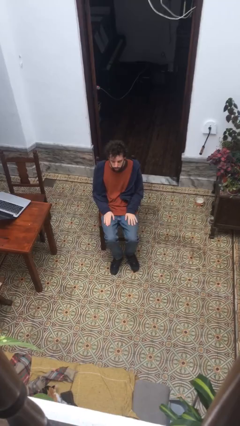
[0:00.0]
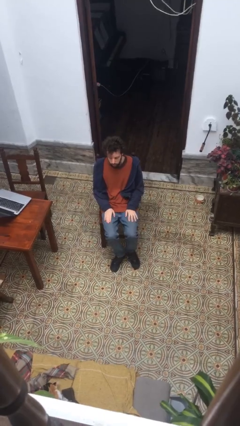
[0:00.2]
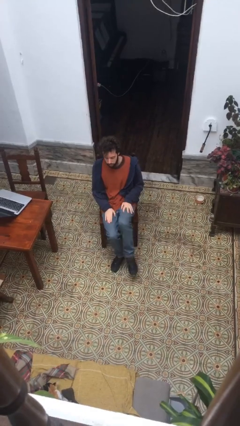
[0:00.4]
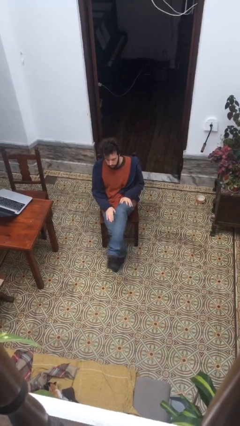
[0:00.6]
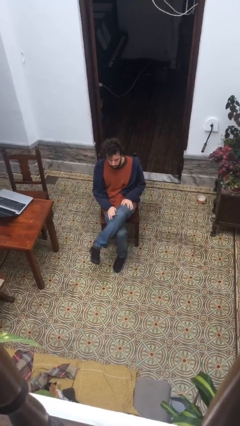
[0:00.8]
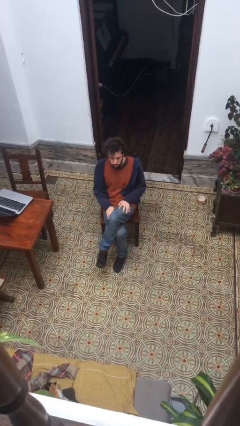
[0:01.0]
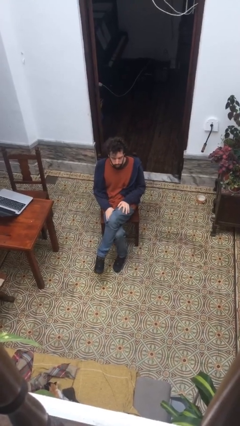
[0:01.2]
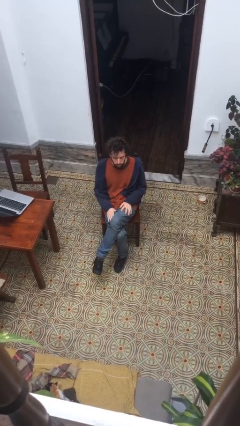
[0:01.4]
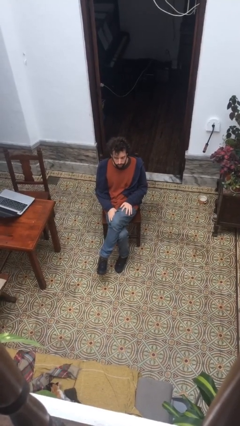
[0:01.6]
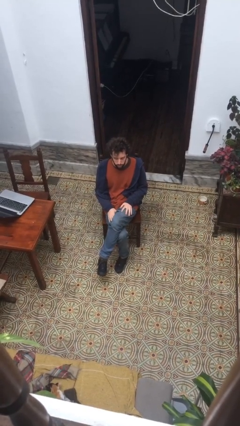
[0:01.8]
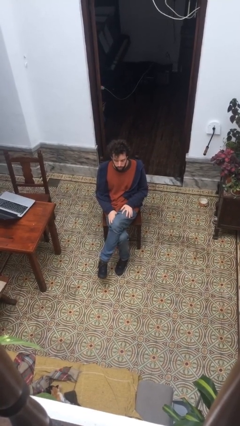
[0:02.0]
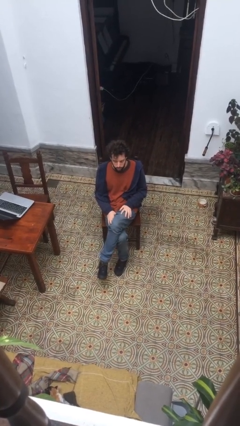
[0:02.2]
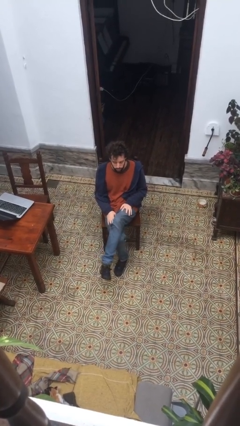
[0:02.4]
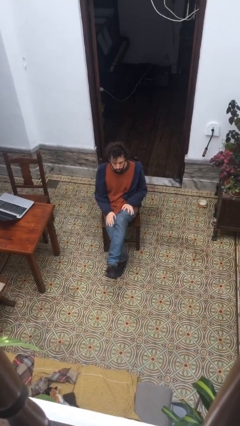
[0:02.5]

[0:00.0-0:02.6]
person crosses legs

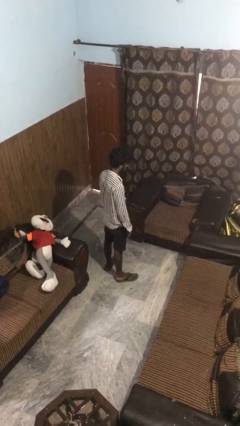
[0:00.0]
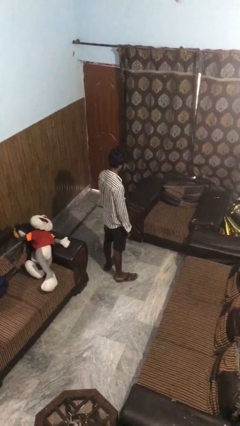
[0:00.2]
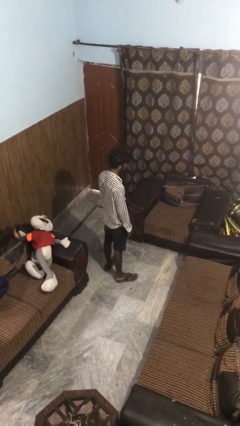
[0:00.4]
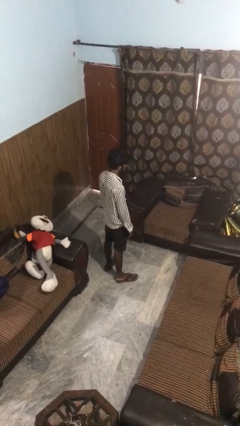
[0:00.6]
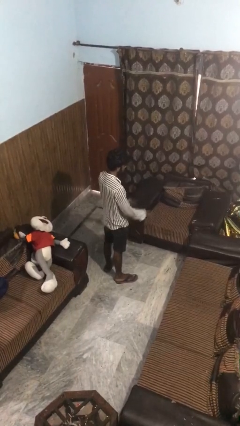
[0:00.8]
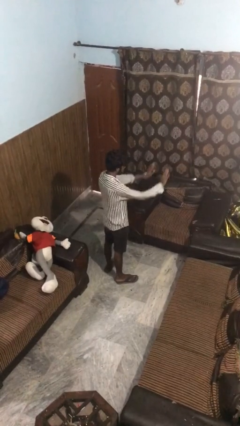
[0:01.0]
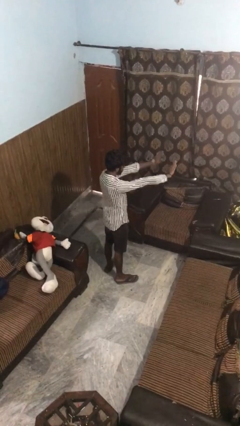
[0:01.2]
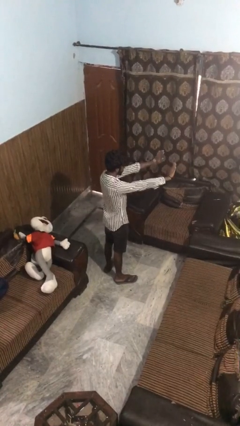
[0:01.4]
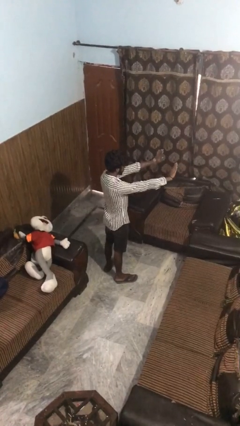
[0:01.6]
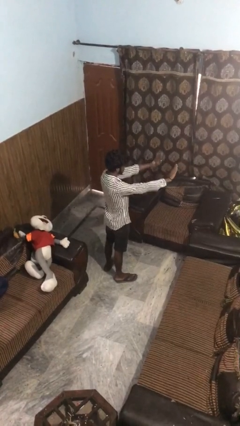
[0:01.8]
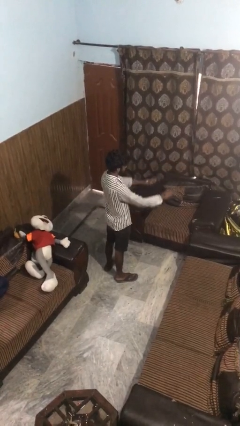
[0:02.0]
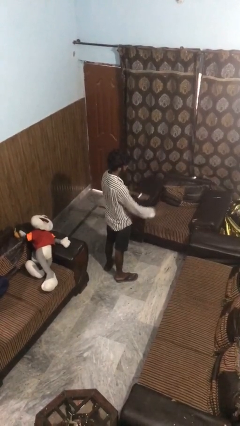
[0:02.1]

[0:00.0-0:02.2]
person gestures stop

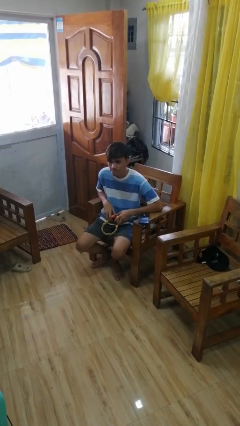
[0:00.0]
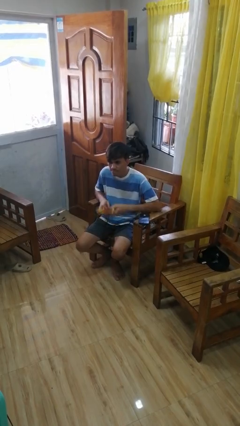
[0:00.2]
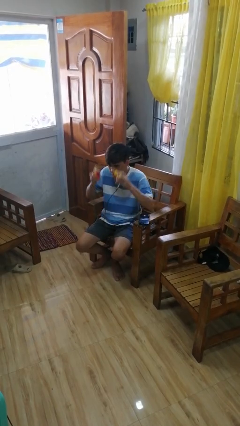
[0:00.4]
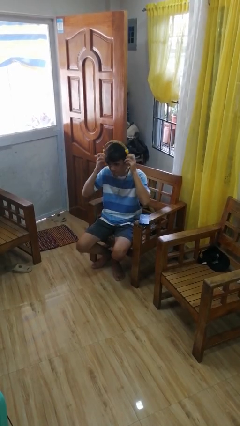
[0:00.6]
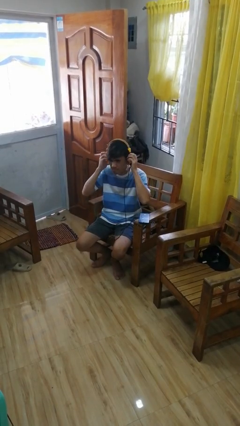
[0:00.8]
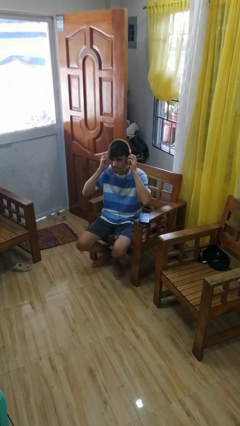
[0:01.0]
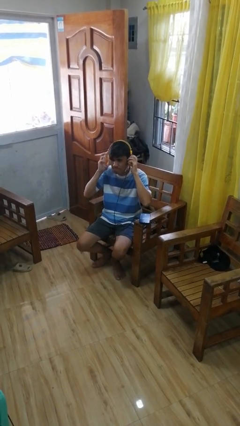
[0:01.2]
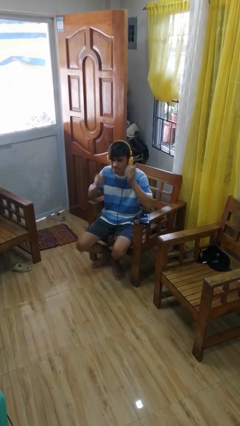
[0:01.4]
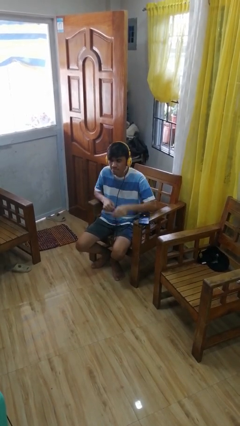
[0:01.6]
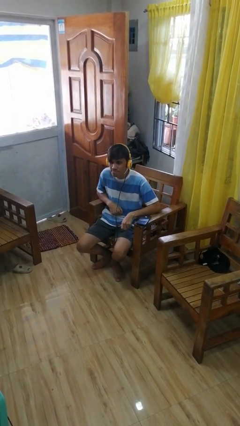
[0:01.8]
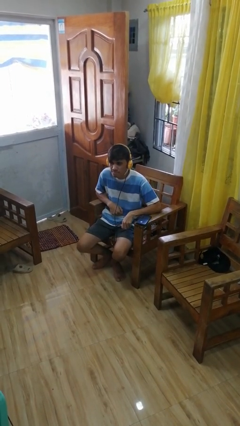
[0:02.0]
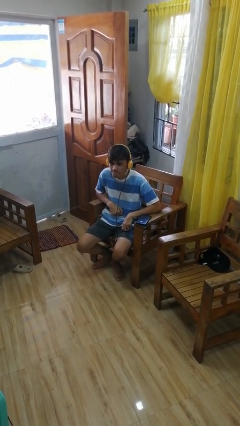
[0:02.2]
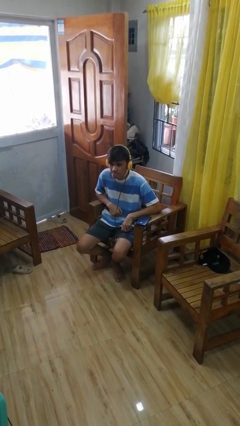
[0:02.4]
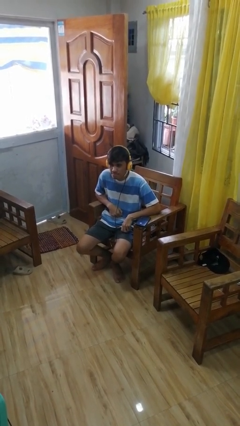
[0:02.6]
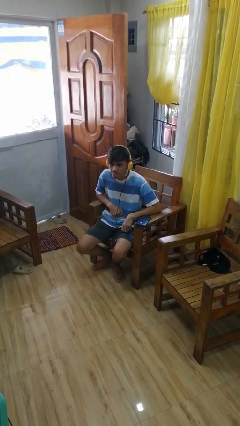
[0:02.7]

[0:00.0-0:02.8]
person puts on headphones

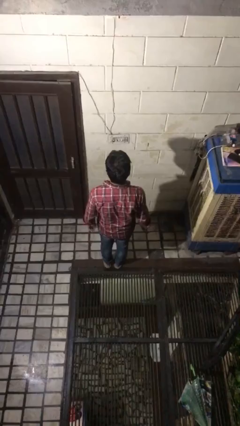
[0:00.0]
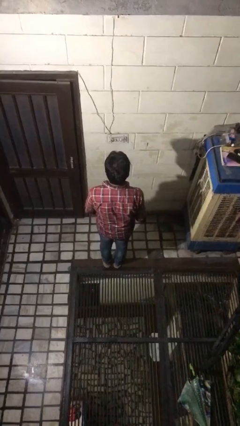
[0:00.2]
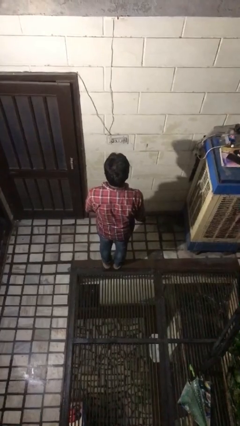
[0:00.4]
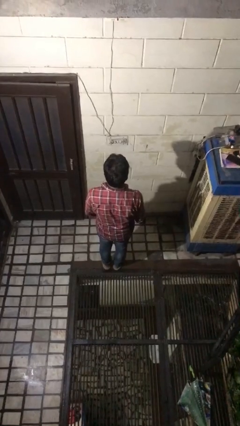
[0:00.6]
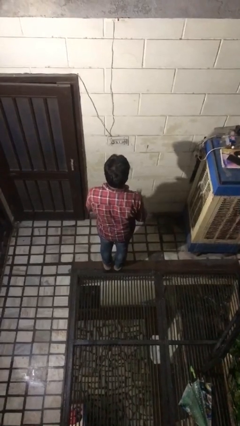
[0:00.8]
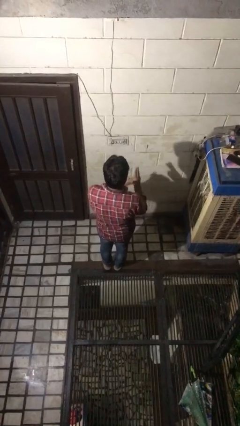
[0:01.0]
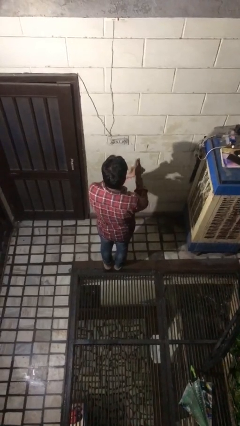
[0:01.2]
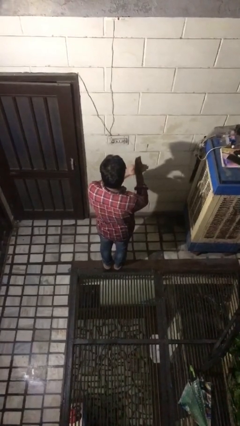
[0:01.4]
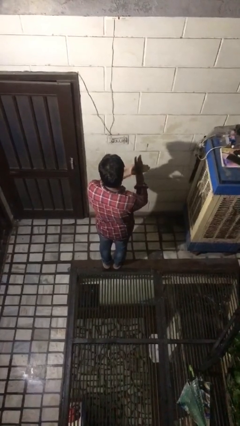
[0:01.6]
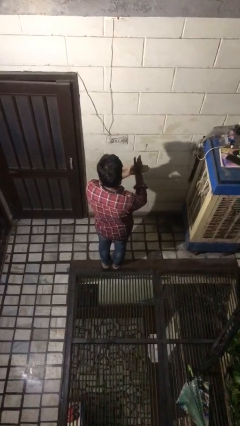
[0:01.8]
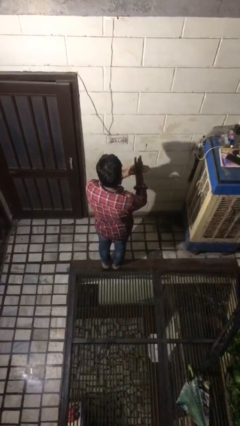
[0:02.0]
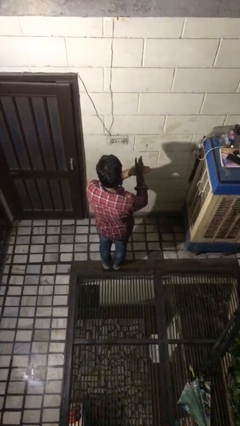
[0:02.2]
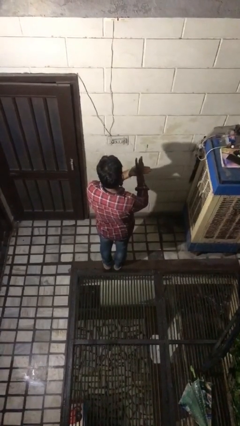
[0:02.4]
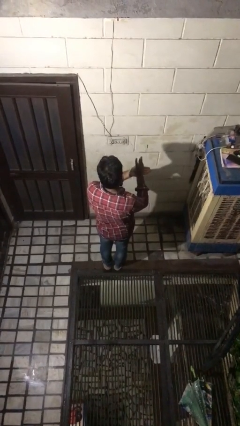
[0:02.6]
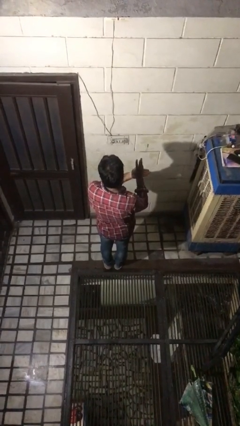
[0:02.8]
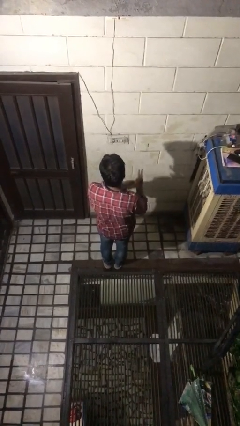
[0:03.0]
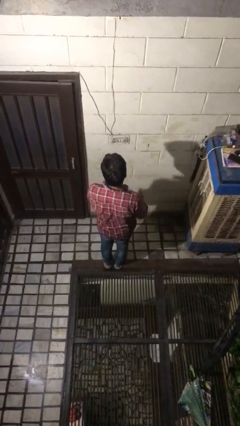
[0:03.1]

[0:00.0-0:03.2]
person gestures number three

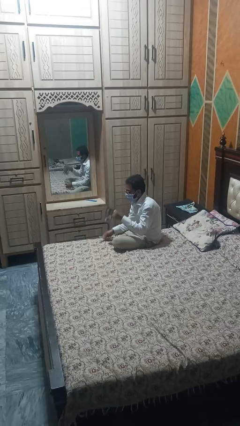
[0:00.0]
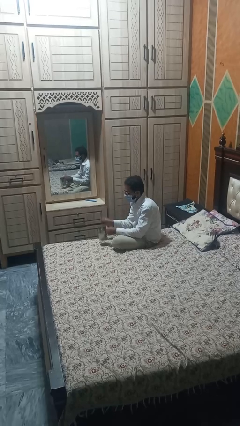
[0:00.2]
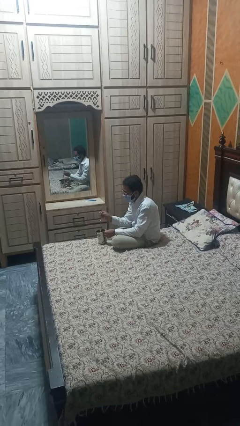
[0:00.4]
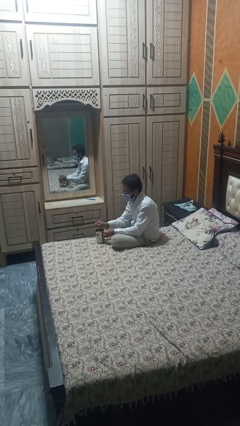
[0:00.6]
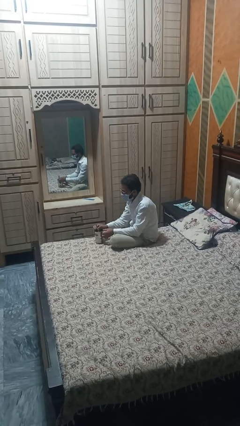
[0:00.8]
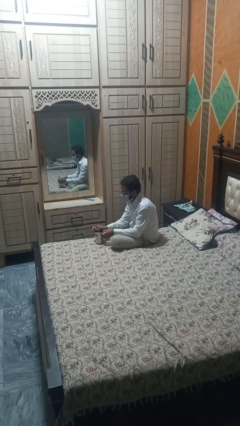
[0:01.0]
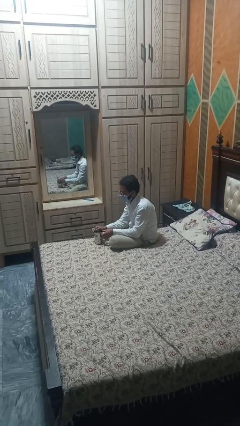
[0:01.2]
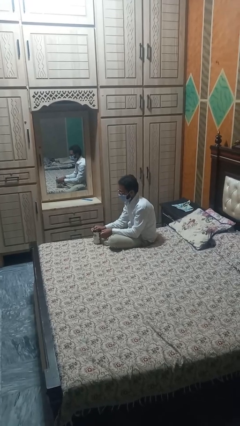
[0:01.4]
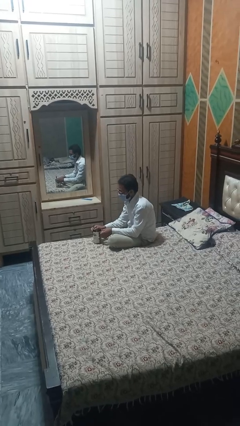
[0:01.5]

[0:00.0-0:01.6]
person stirs mug

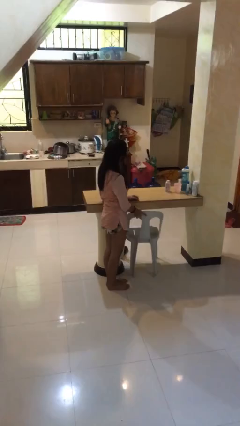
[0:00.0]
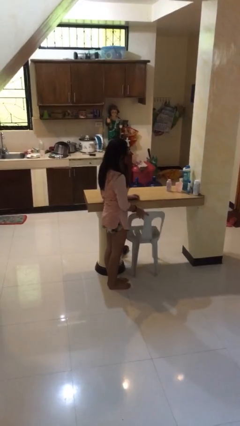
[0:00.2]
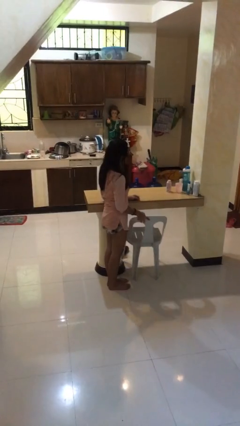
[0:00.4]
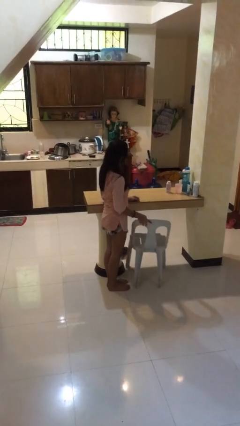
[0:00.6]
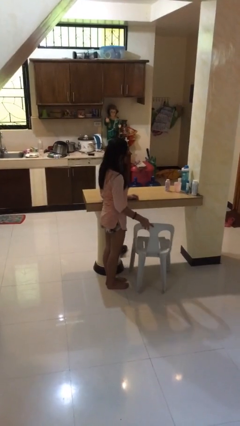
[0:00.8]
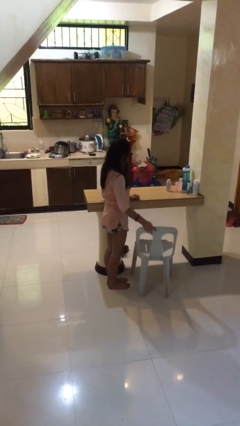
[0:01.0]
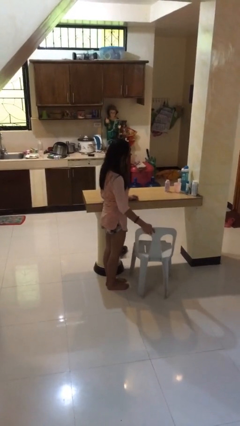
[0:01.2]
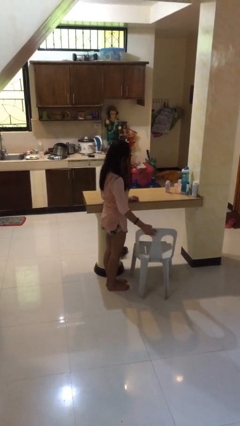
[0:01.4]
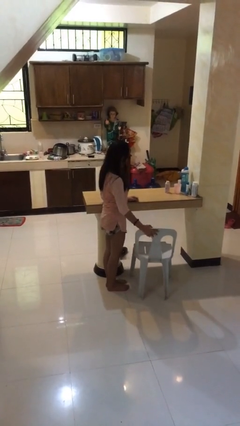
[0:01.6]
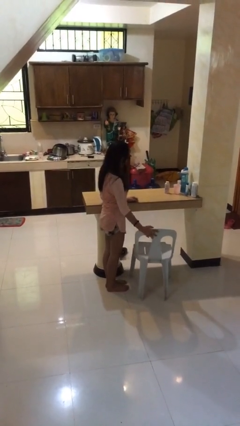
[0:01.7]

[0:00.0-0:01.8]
person pulls out chair

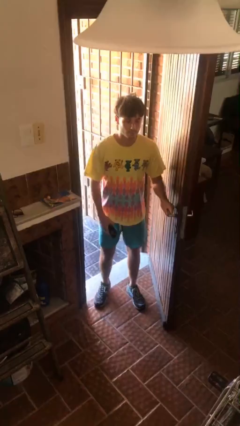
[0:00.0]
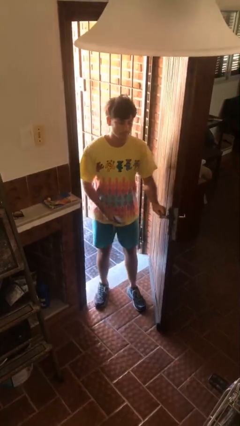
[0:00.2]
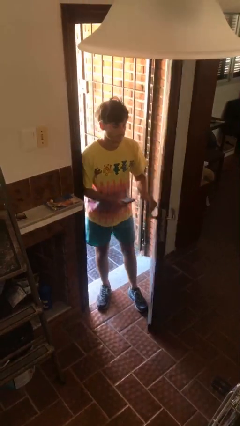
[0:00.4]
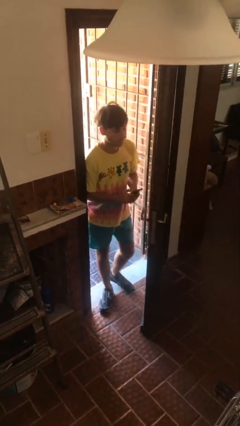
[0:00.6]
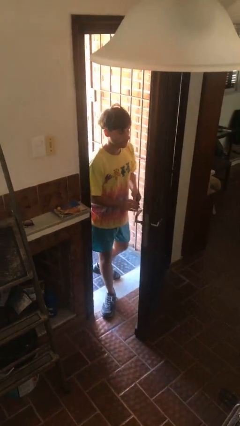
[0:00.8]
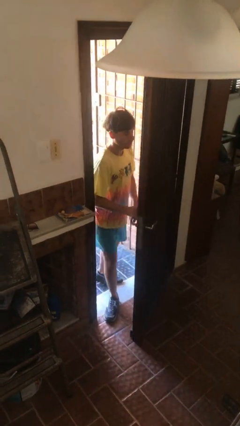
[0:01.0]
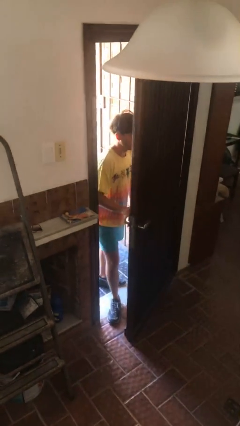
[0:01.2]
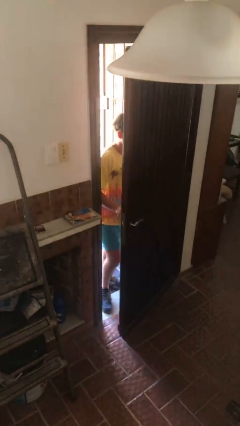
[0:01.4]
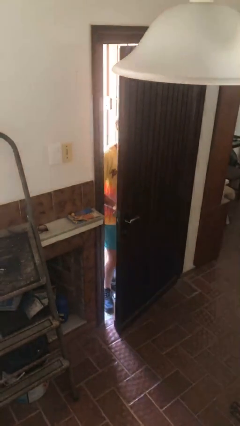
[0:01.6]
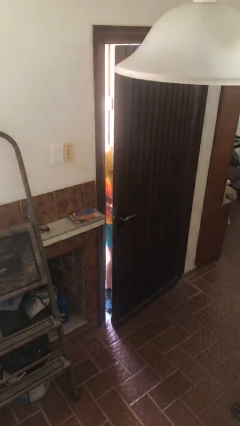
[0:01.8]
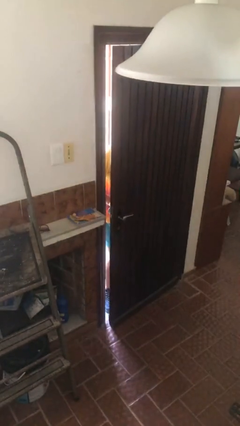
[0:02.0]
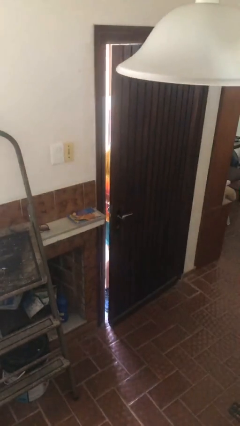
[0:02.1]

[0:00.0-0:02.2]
person closes facility door

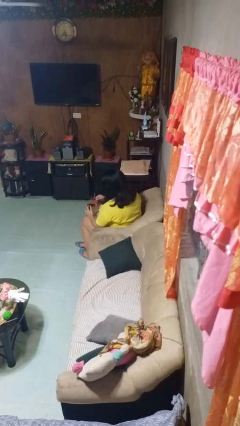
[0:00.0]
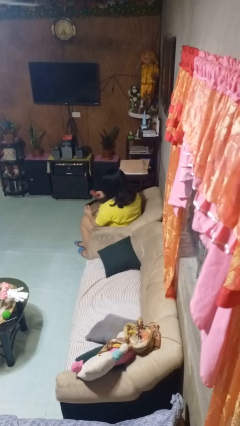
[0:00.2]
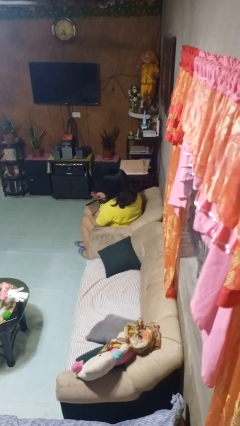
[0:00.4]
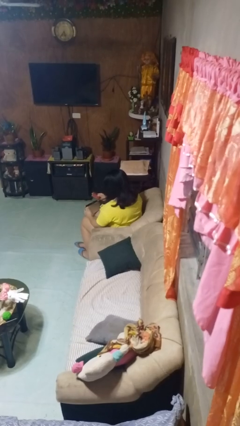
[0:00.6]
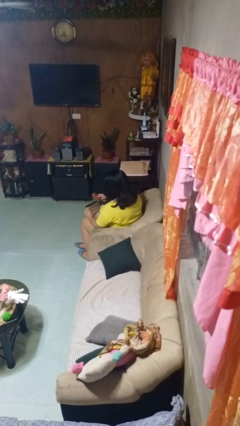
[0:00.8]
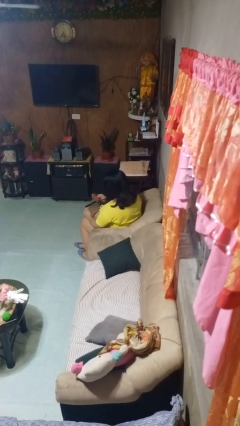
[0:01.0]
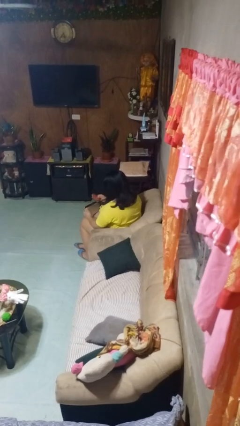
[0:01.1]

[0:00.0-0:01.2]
person takes object from purse
